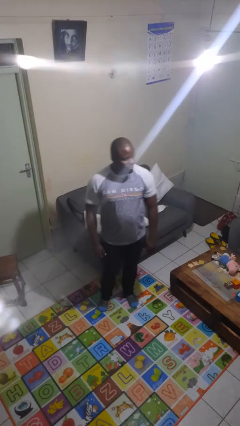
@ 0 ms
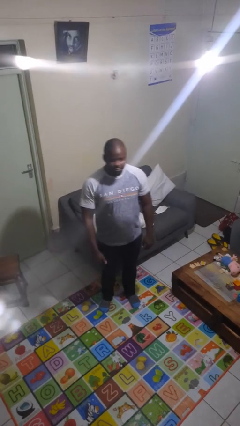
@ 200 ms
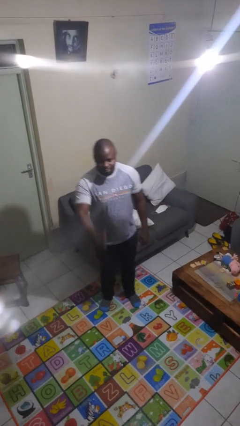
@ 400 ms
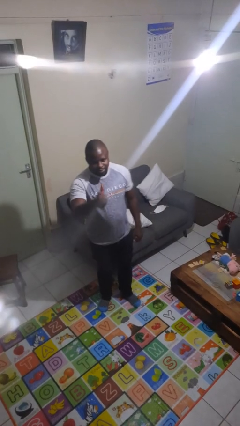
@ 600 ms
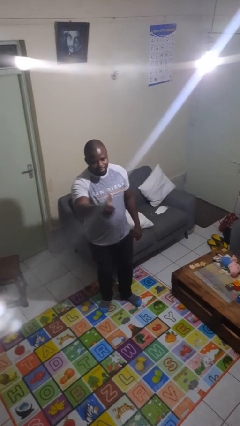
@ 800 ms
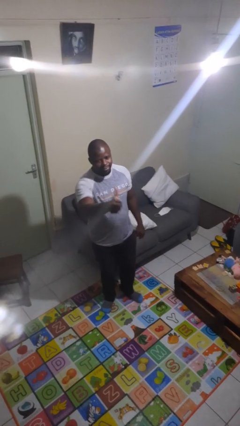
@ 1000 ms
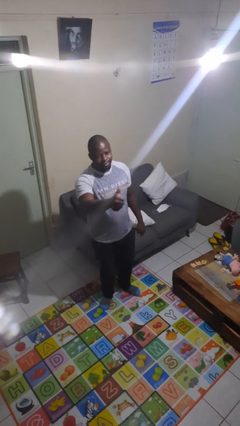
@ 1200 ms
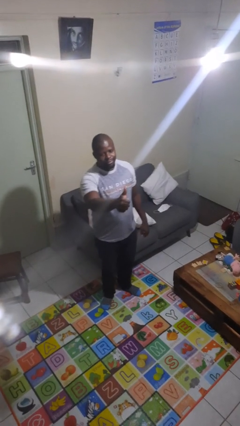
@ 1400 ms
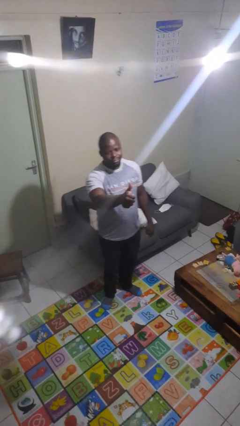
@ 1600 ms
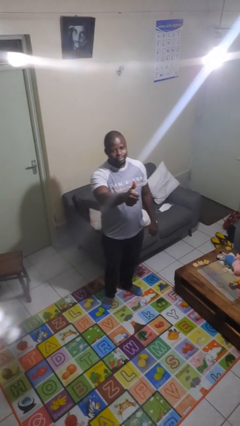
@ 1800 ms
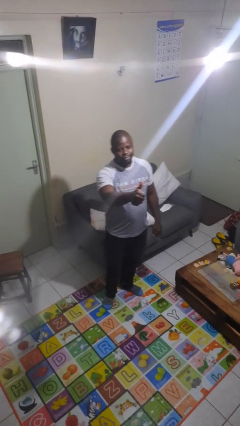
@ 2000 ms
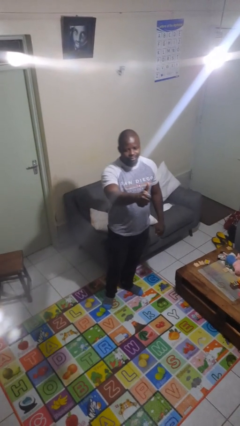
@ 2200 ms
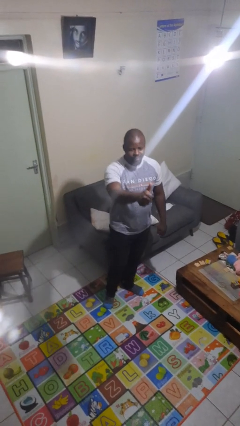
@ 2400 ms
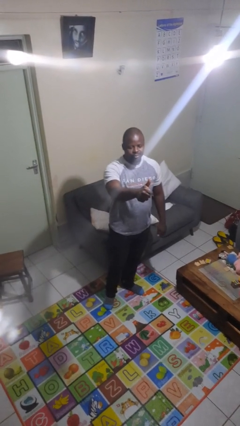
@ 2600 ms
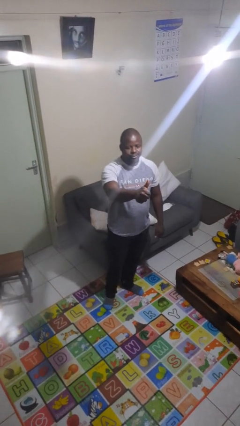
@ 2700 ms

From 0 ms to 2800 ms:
person gestures thumbs up

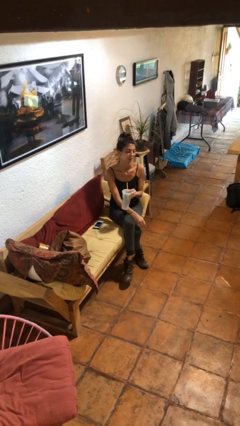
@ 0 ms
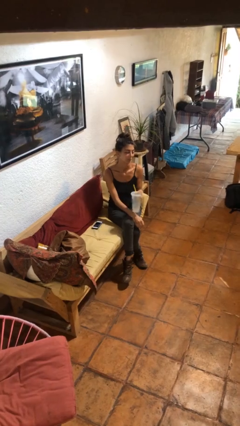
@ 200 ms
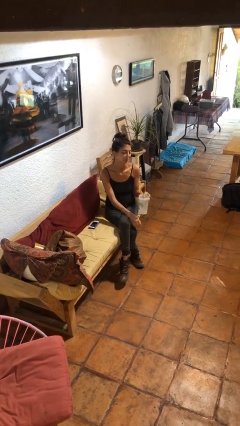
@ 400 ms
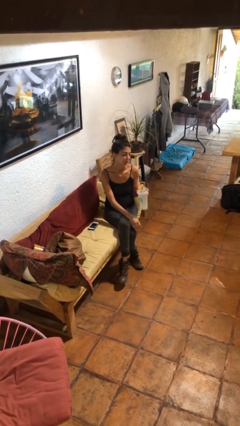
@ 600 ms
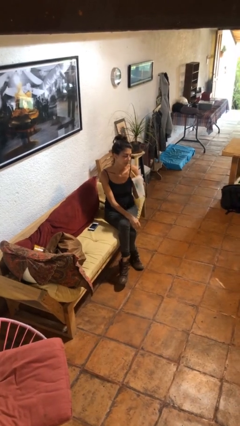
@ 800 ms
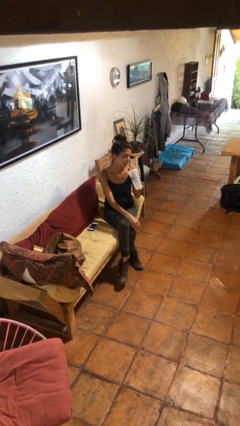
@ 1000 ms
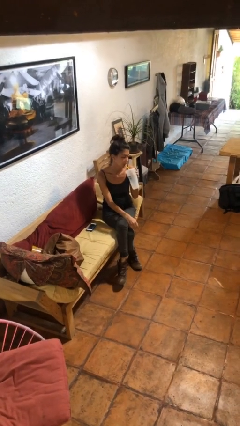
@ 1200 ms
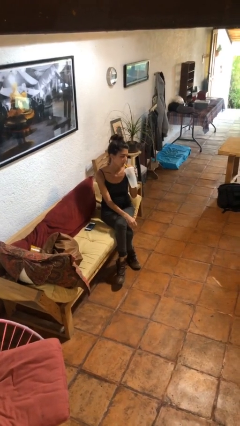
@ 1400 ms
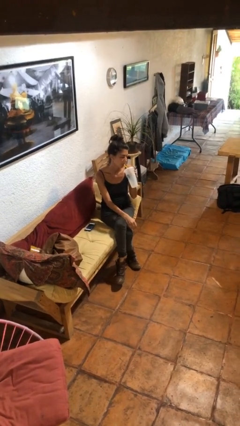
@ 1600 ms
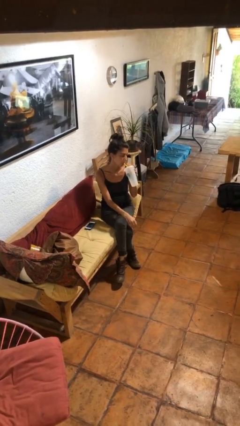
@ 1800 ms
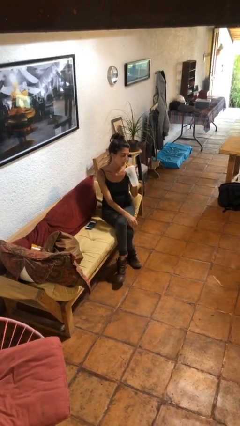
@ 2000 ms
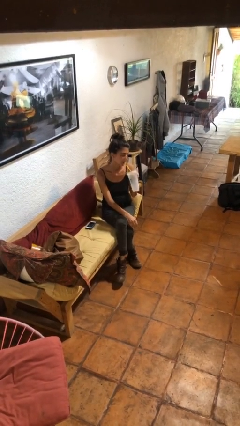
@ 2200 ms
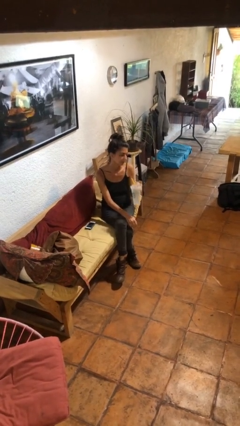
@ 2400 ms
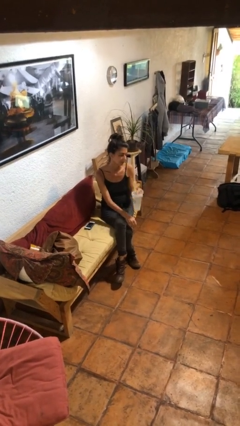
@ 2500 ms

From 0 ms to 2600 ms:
person drinks from straw

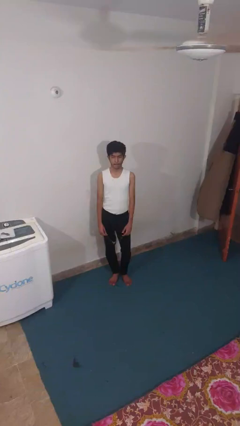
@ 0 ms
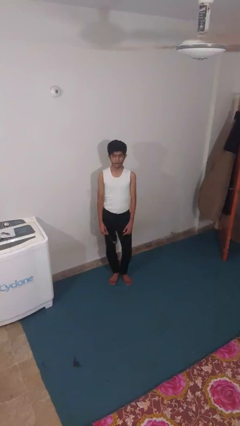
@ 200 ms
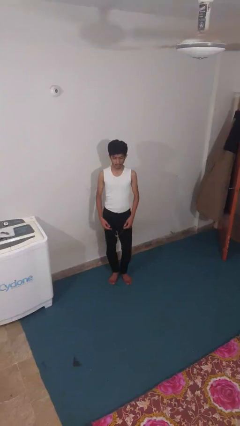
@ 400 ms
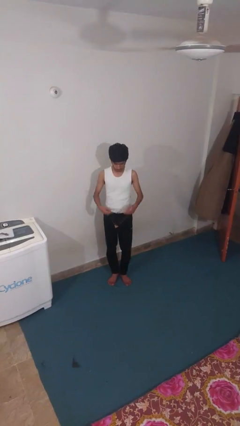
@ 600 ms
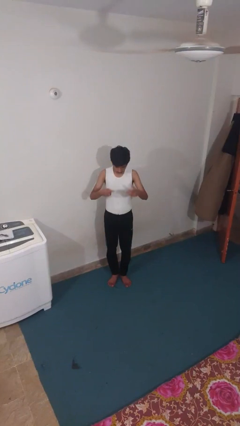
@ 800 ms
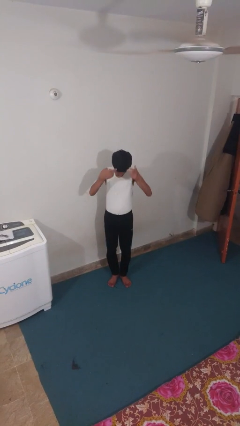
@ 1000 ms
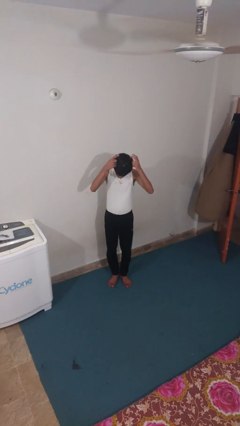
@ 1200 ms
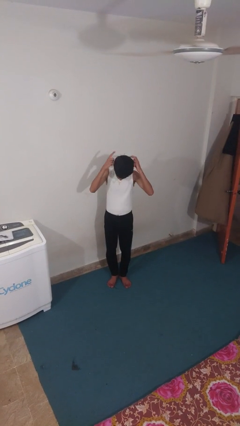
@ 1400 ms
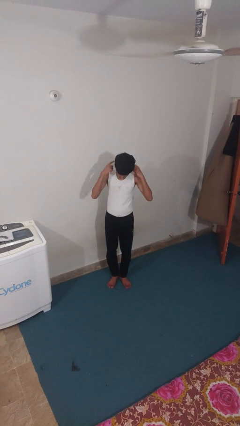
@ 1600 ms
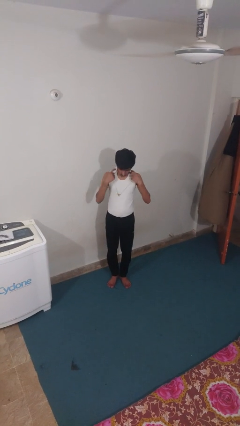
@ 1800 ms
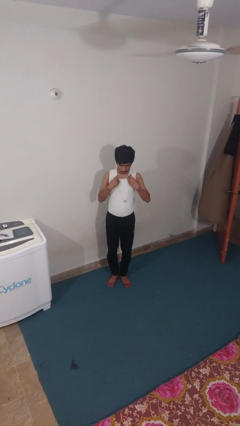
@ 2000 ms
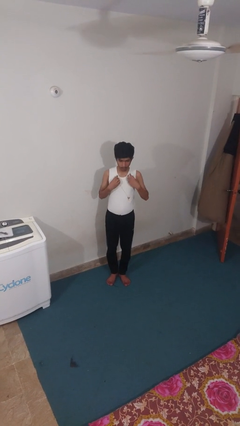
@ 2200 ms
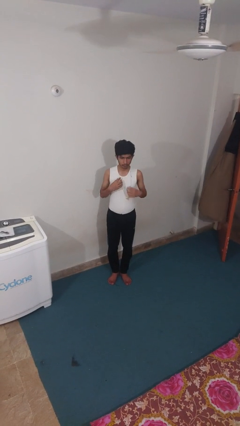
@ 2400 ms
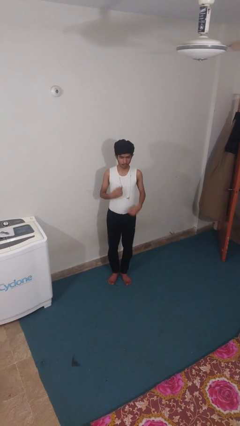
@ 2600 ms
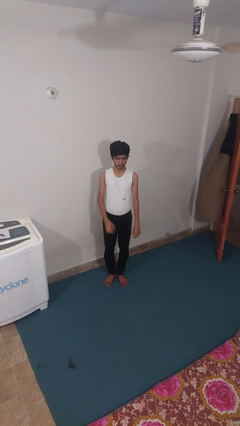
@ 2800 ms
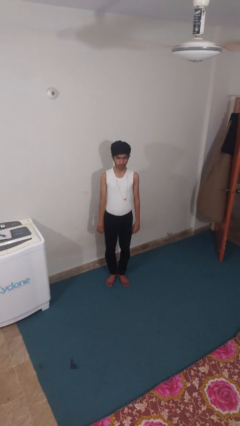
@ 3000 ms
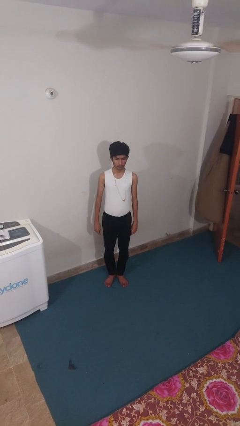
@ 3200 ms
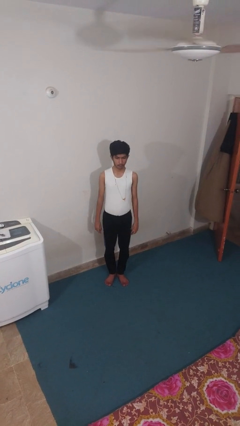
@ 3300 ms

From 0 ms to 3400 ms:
person puts on necklace

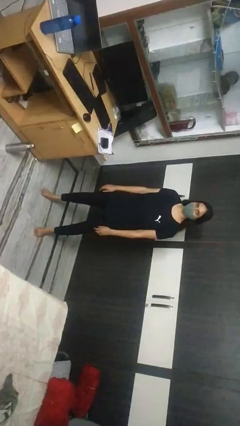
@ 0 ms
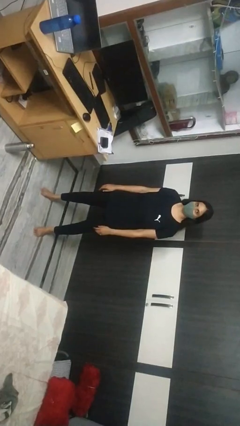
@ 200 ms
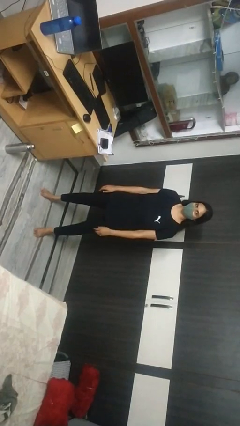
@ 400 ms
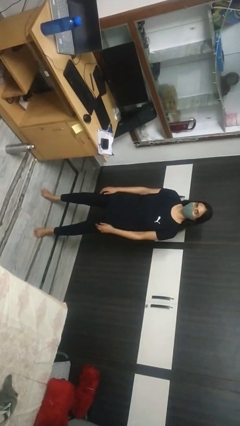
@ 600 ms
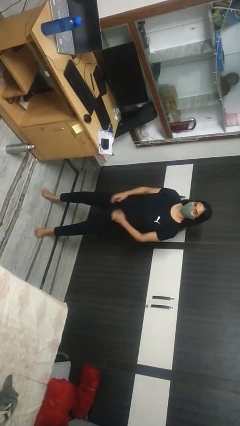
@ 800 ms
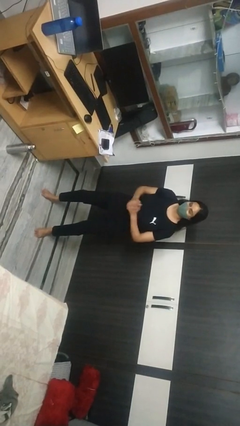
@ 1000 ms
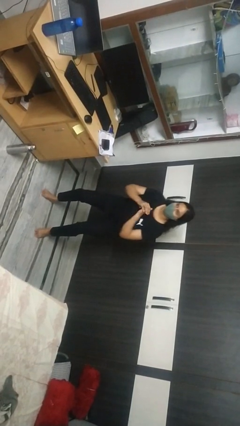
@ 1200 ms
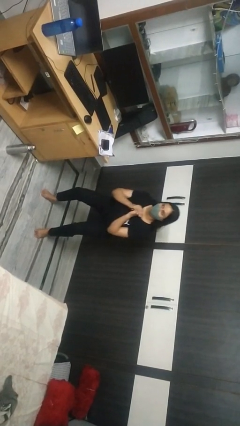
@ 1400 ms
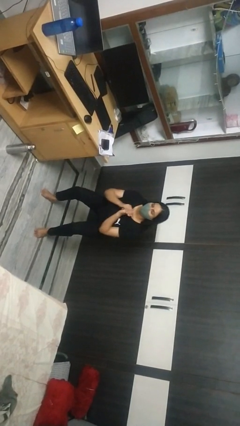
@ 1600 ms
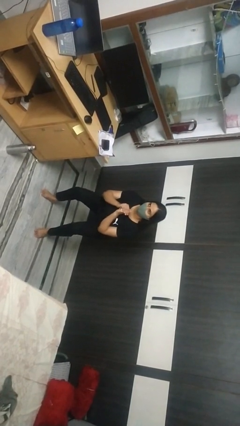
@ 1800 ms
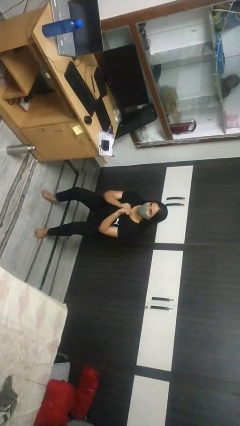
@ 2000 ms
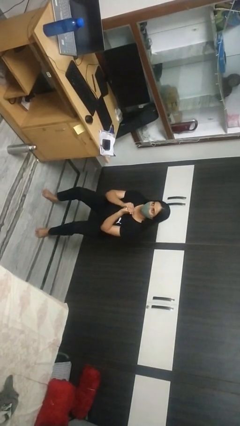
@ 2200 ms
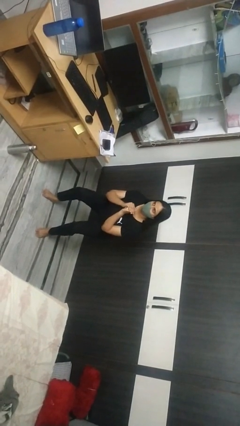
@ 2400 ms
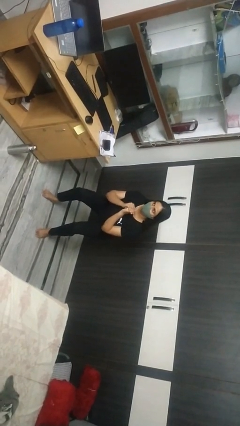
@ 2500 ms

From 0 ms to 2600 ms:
person squats

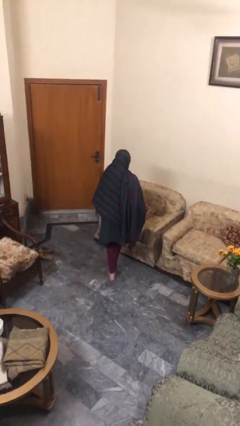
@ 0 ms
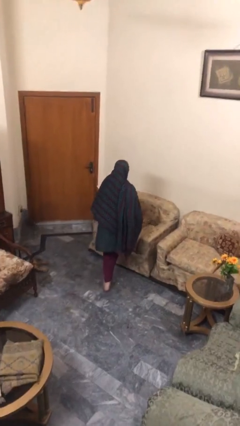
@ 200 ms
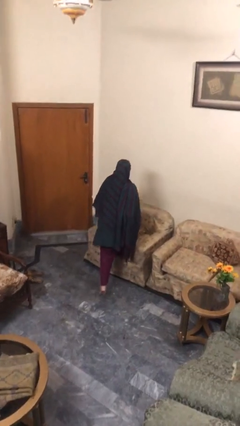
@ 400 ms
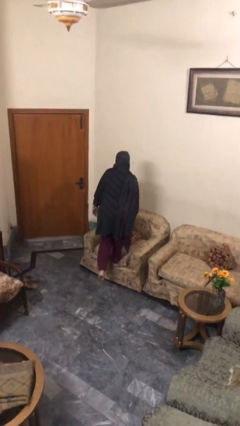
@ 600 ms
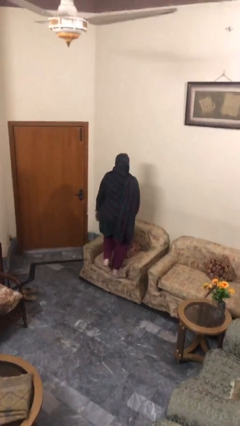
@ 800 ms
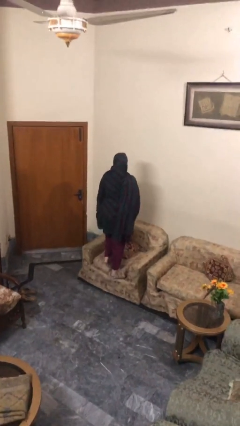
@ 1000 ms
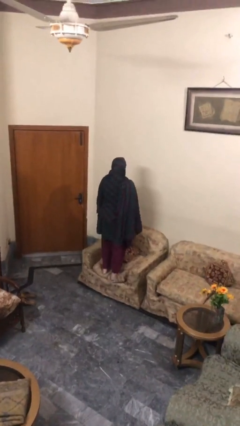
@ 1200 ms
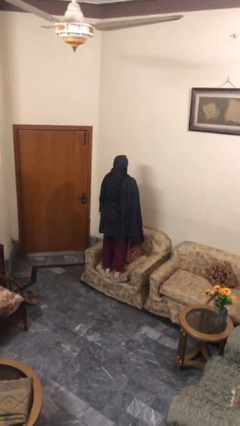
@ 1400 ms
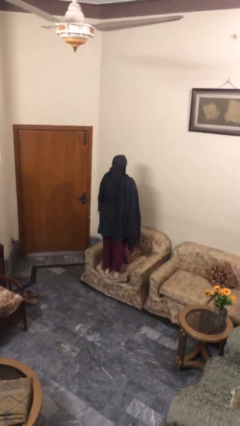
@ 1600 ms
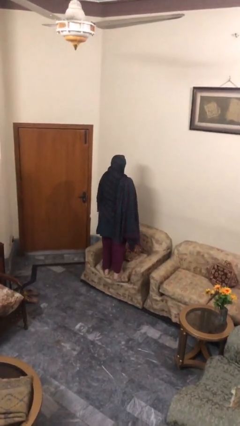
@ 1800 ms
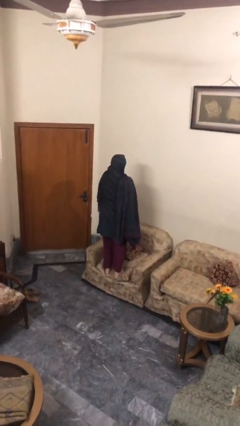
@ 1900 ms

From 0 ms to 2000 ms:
person climbs on couch

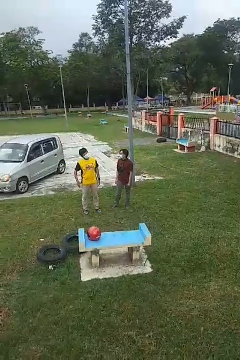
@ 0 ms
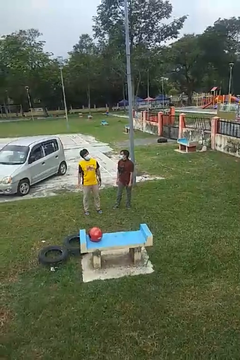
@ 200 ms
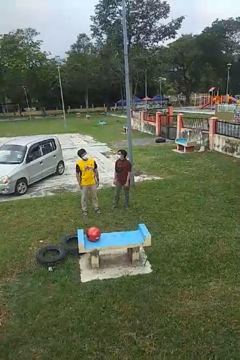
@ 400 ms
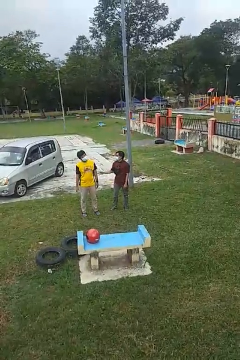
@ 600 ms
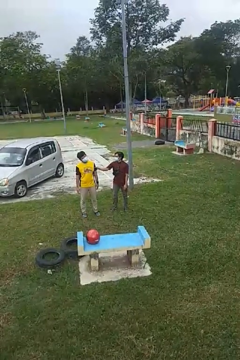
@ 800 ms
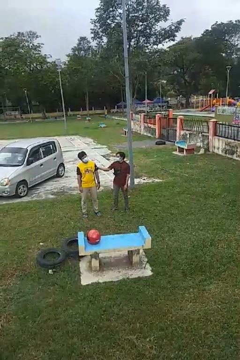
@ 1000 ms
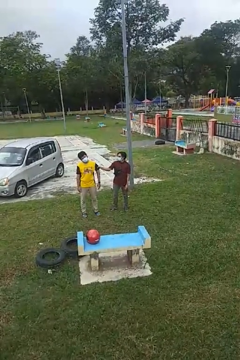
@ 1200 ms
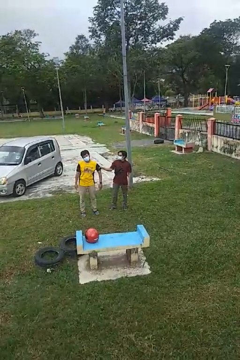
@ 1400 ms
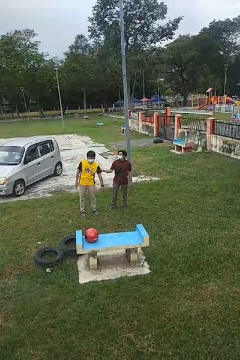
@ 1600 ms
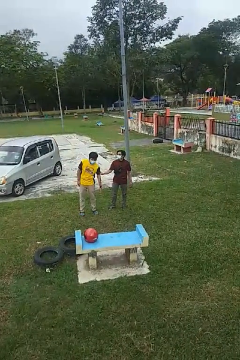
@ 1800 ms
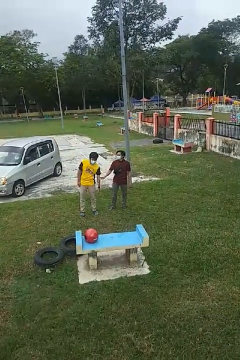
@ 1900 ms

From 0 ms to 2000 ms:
person grabs person by bicep

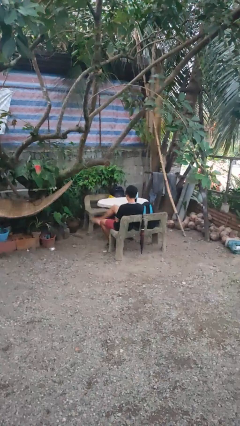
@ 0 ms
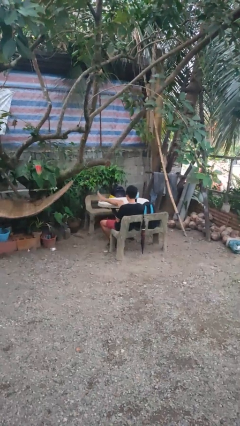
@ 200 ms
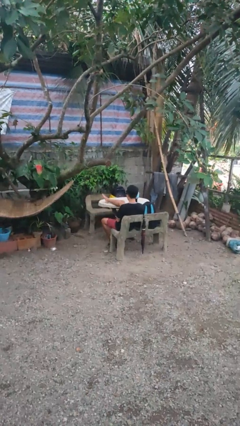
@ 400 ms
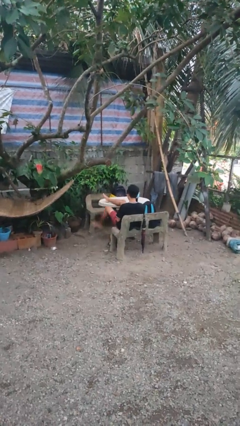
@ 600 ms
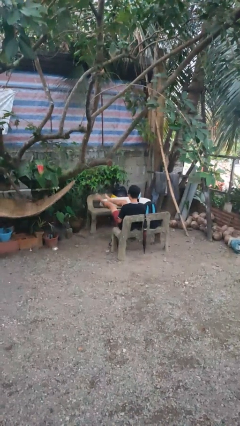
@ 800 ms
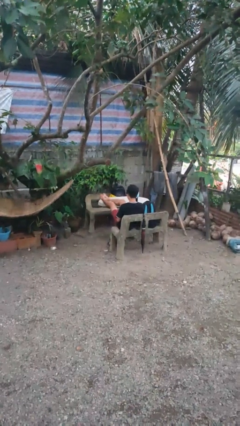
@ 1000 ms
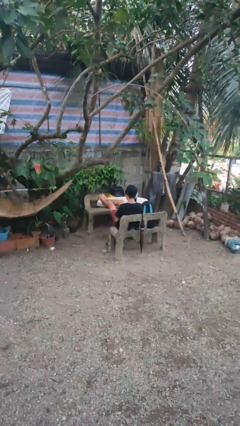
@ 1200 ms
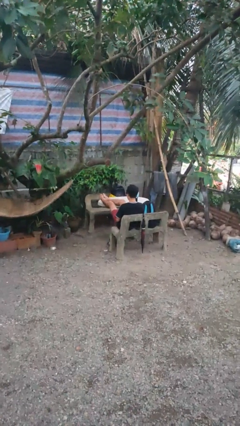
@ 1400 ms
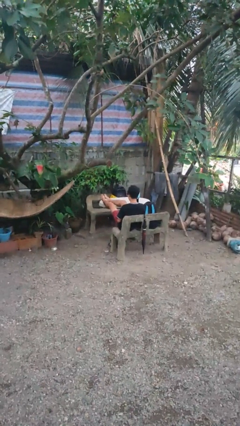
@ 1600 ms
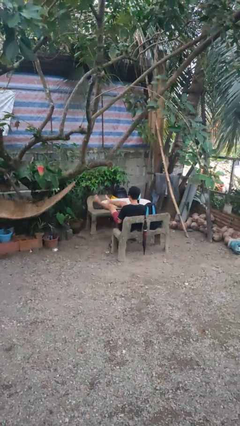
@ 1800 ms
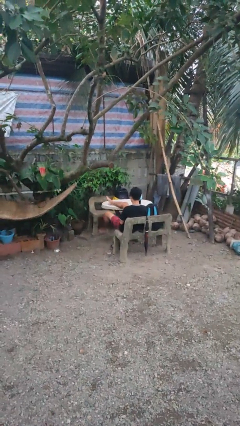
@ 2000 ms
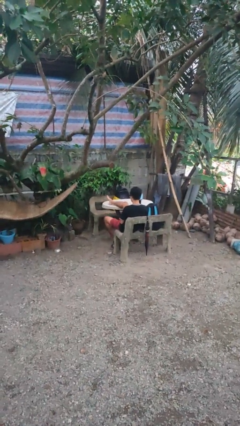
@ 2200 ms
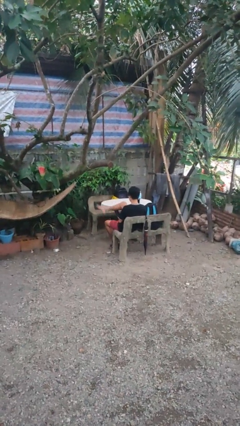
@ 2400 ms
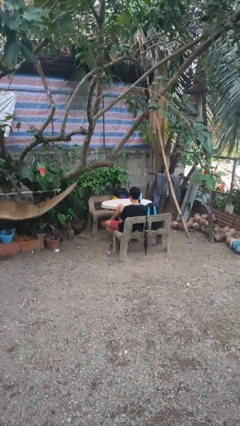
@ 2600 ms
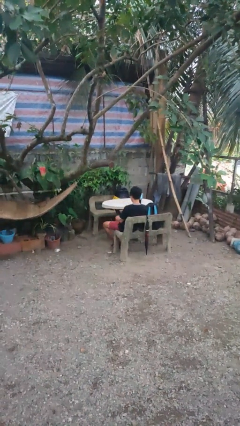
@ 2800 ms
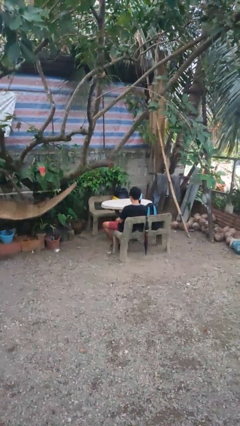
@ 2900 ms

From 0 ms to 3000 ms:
person puts feet up
